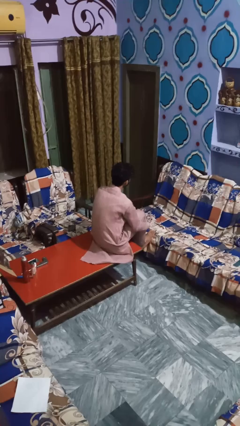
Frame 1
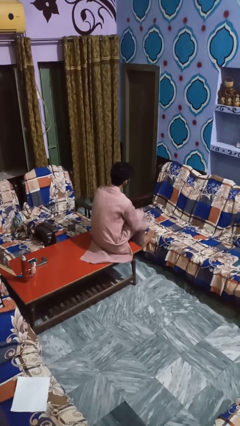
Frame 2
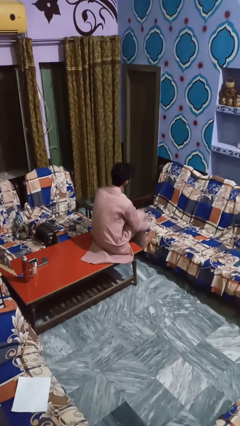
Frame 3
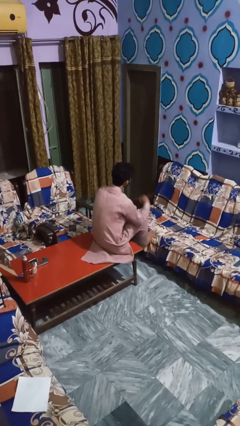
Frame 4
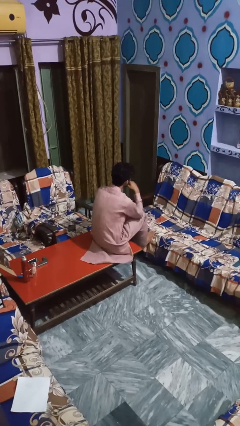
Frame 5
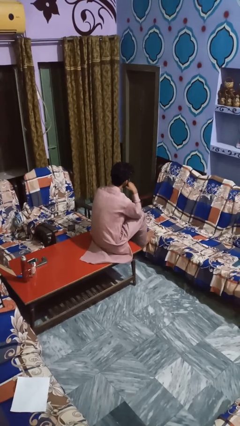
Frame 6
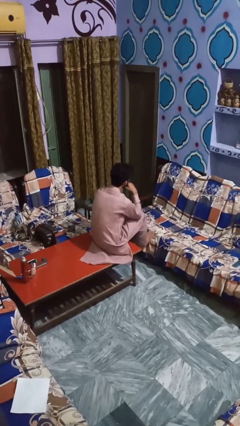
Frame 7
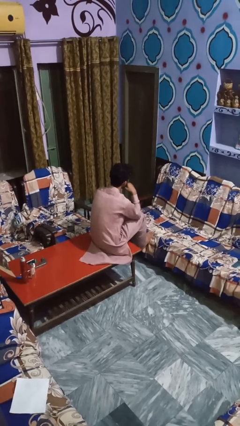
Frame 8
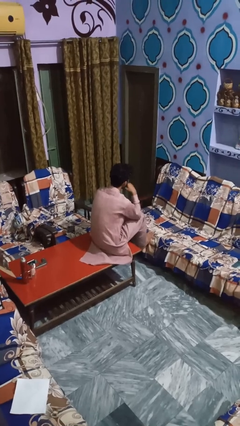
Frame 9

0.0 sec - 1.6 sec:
person licks fingers

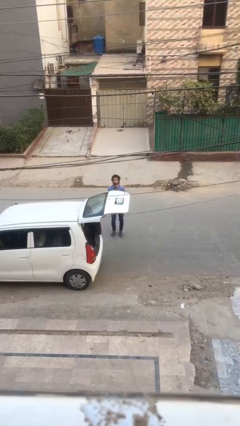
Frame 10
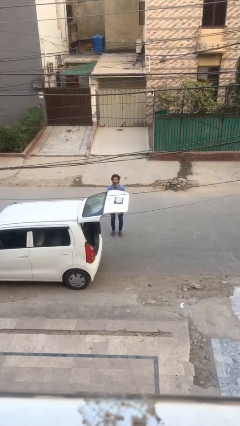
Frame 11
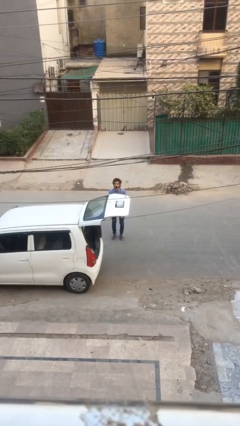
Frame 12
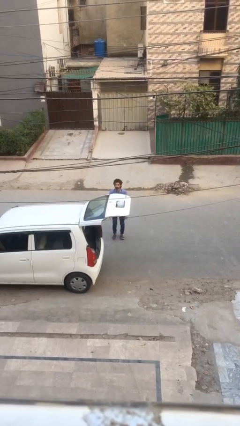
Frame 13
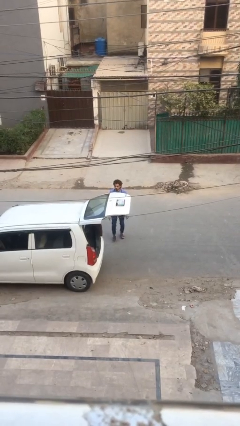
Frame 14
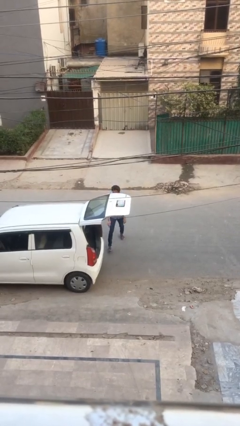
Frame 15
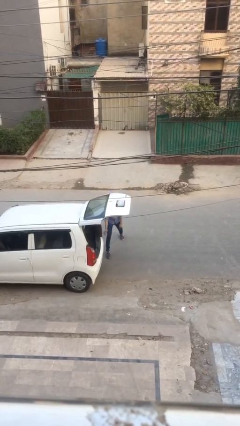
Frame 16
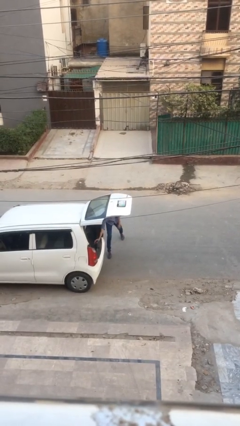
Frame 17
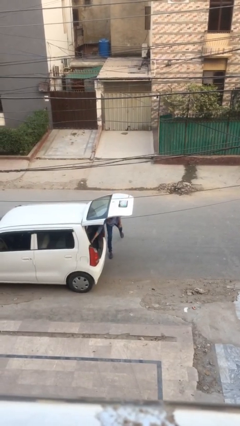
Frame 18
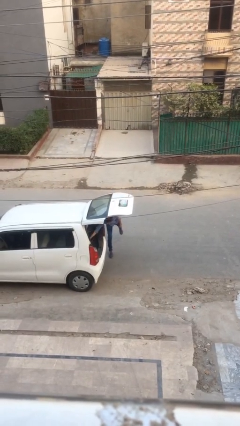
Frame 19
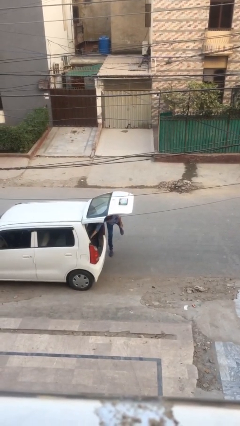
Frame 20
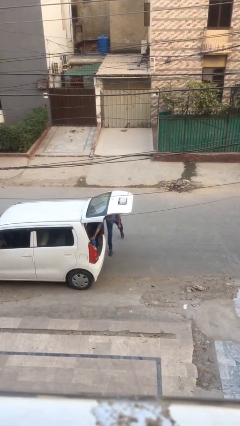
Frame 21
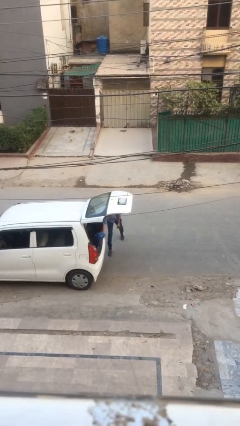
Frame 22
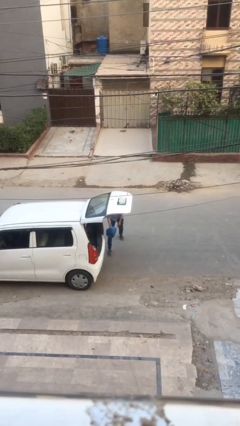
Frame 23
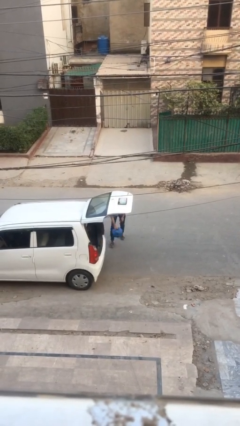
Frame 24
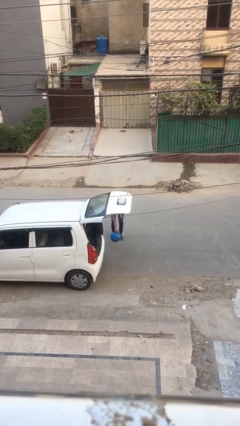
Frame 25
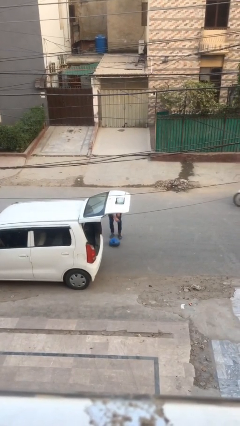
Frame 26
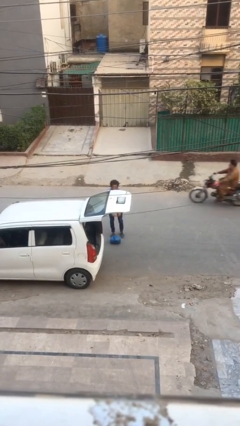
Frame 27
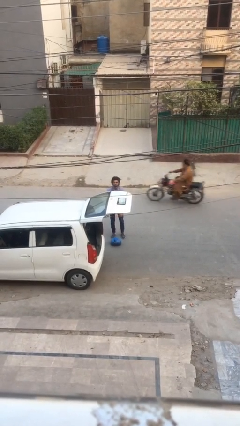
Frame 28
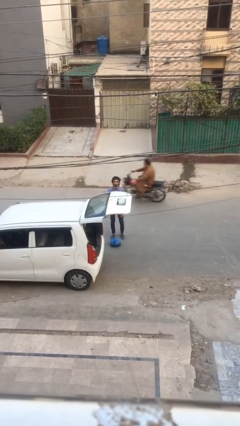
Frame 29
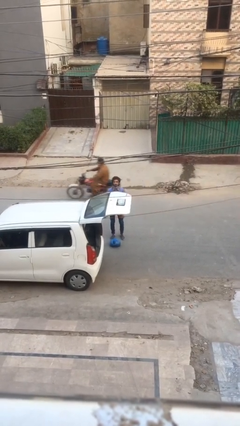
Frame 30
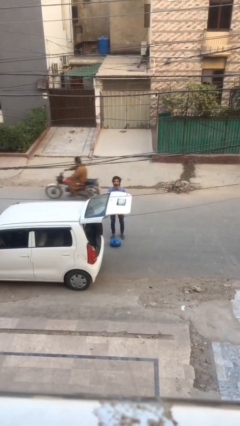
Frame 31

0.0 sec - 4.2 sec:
person unloads car

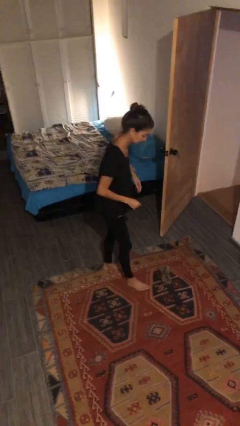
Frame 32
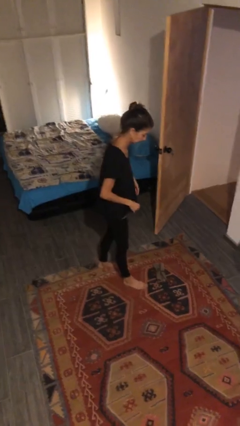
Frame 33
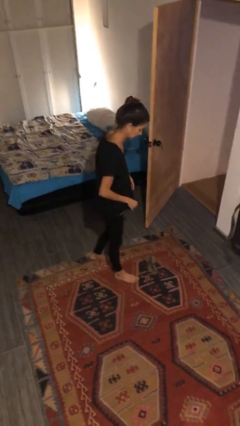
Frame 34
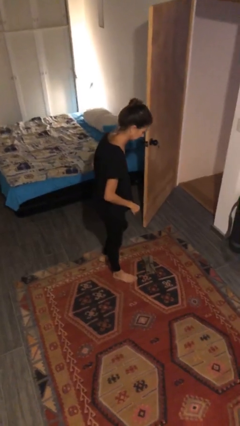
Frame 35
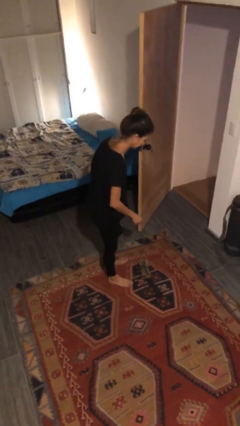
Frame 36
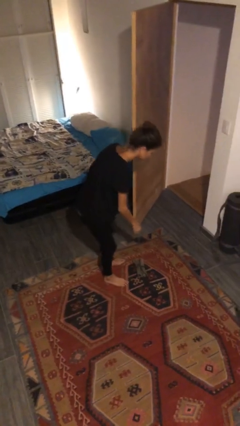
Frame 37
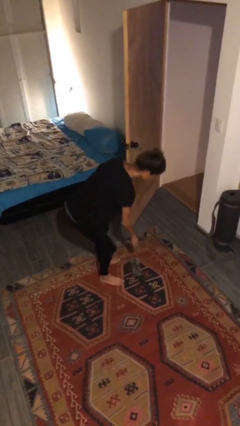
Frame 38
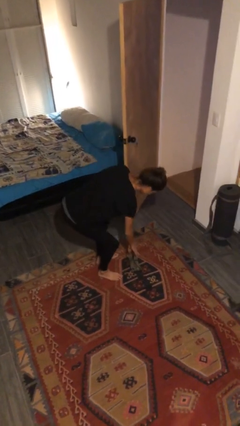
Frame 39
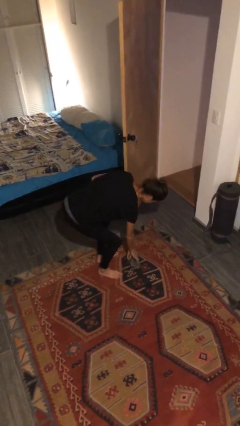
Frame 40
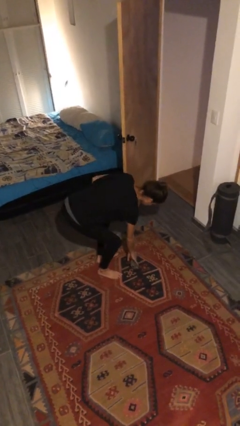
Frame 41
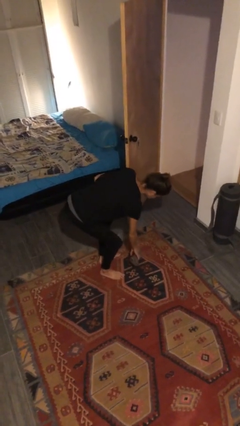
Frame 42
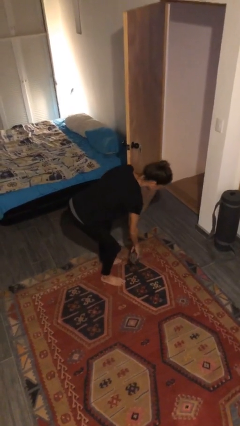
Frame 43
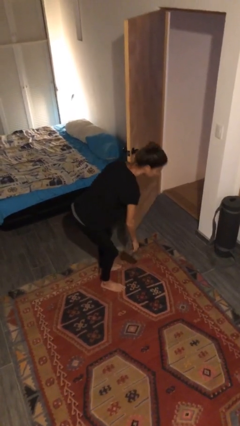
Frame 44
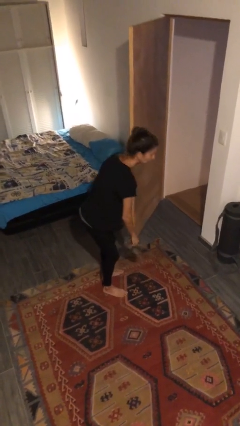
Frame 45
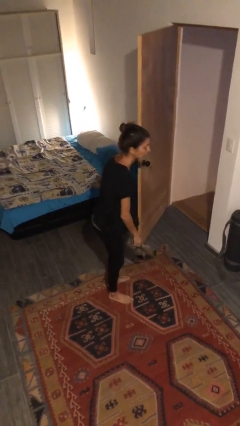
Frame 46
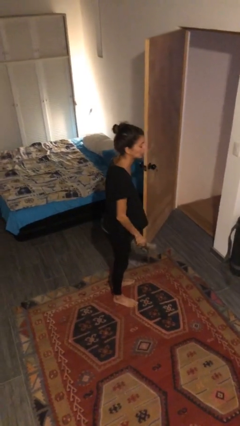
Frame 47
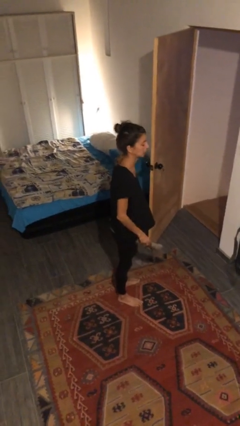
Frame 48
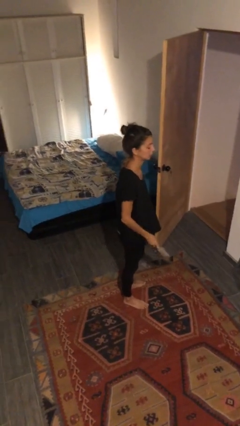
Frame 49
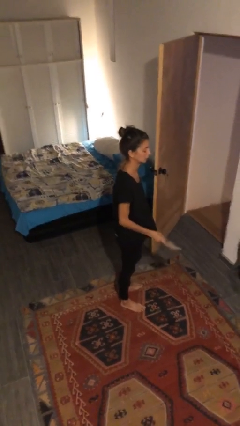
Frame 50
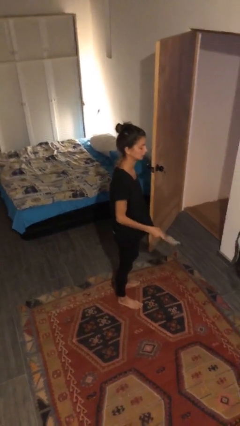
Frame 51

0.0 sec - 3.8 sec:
person picks up object from floor

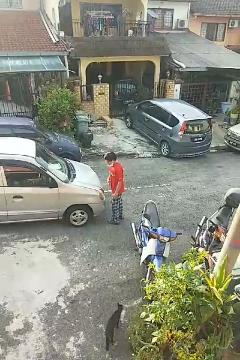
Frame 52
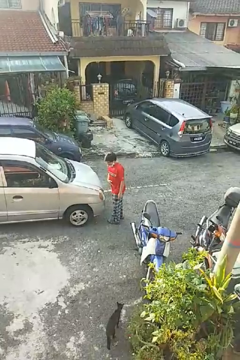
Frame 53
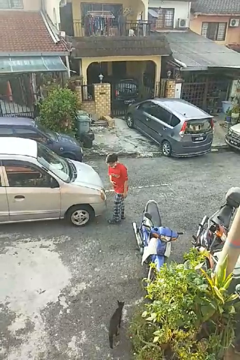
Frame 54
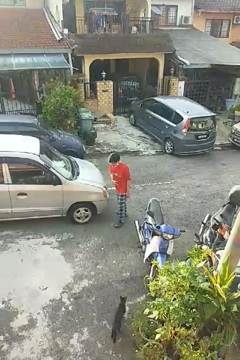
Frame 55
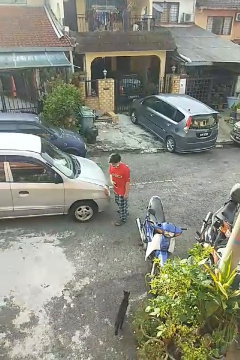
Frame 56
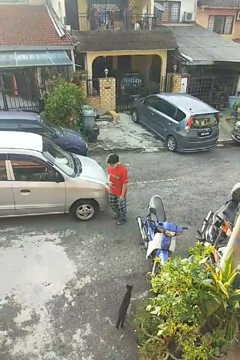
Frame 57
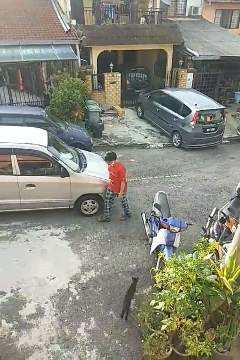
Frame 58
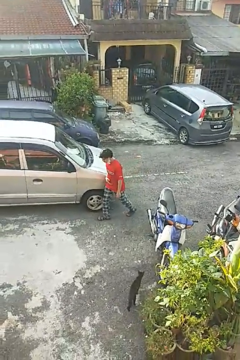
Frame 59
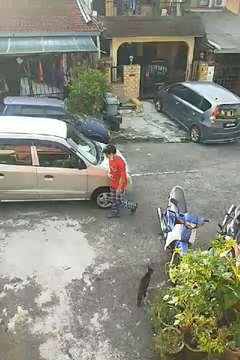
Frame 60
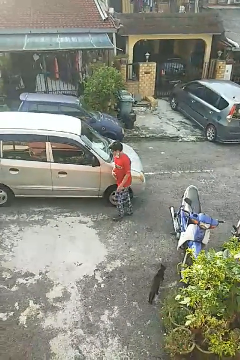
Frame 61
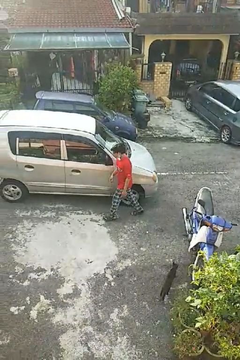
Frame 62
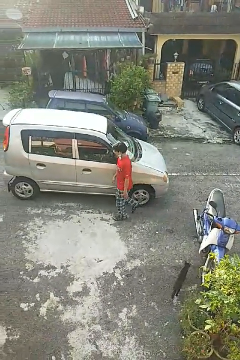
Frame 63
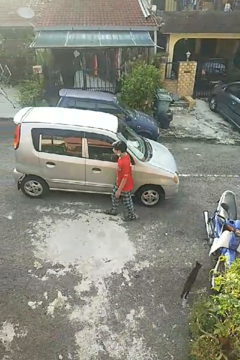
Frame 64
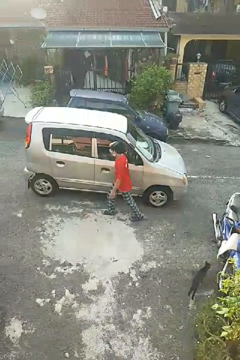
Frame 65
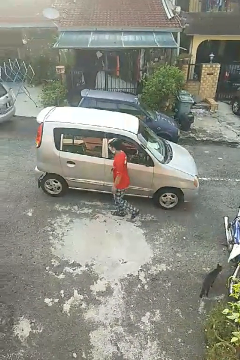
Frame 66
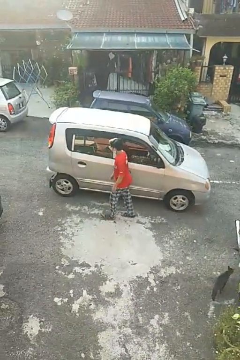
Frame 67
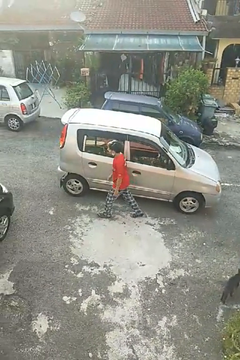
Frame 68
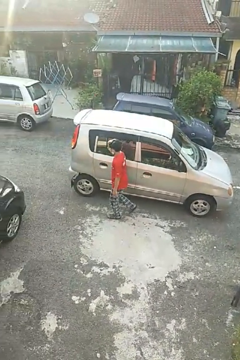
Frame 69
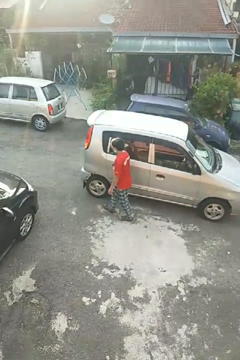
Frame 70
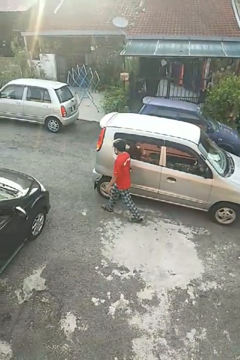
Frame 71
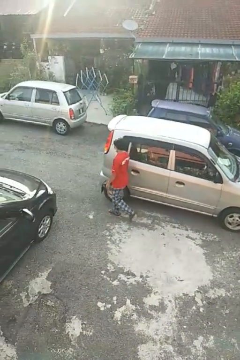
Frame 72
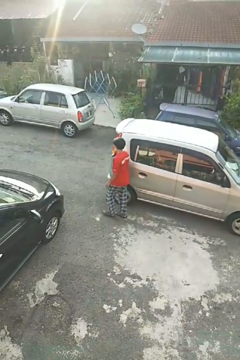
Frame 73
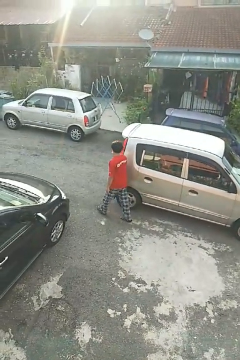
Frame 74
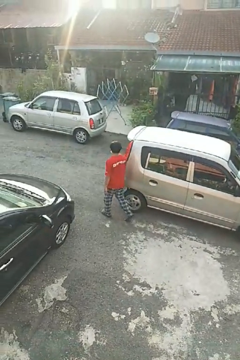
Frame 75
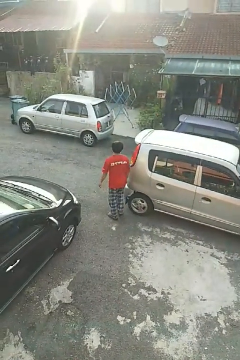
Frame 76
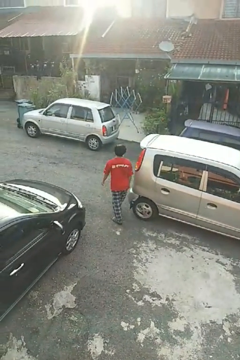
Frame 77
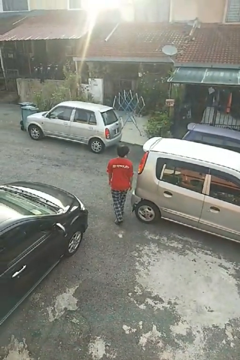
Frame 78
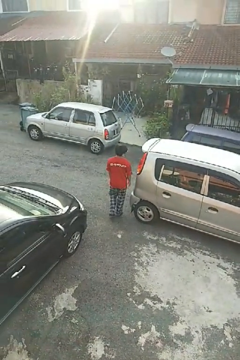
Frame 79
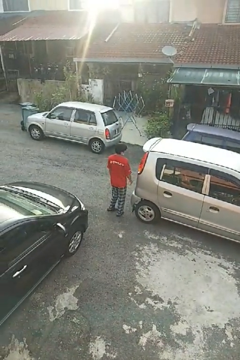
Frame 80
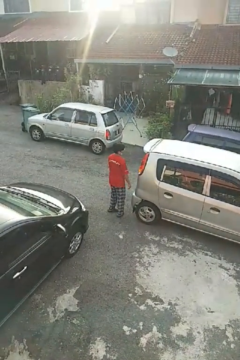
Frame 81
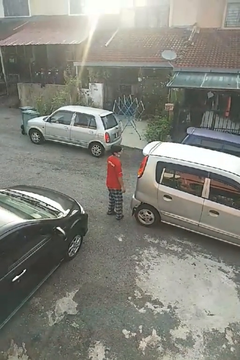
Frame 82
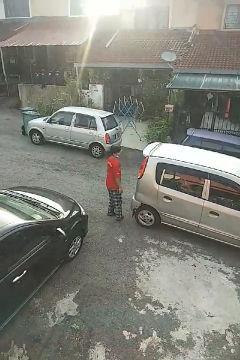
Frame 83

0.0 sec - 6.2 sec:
person walks around car

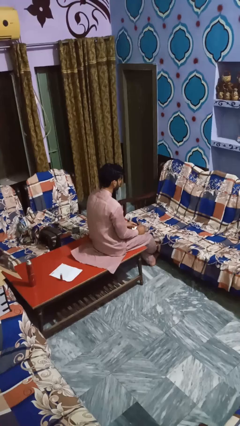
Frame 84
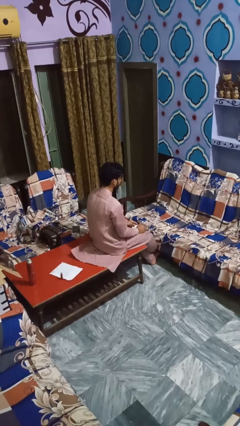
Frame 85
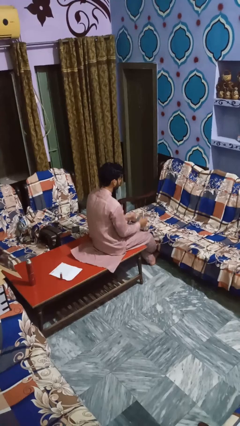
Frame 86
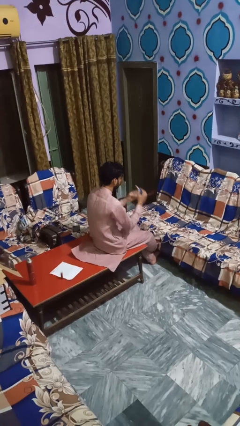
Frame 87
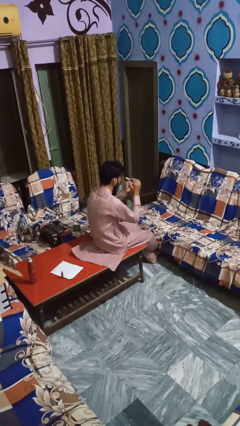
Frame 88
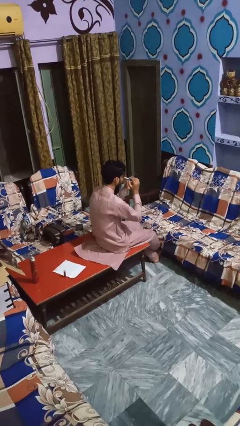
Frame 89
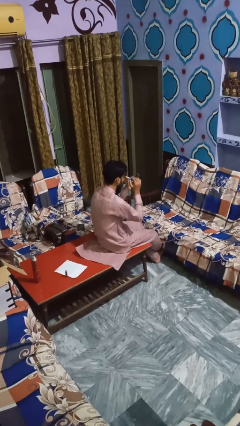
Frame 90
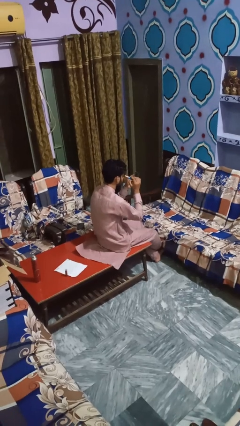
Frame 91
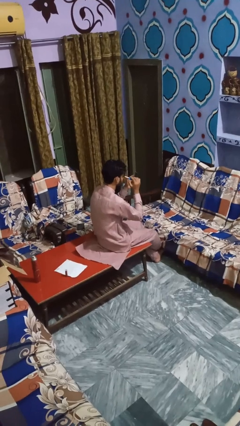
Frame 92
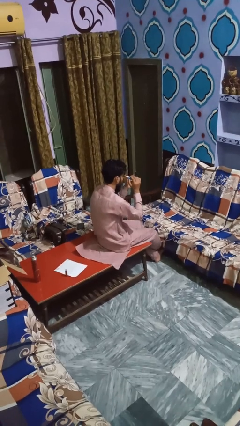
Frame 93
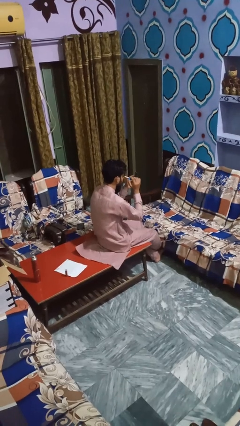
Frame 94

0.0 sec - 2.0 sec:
person applies eye makeup

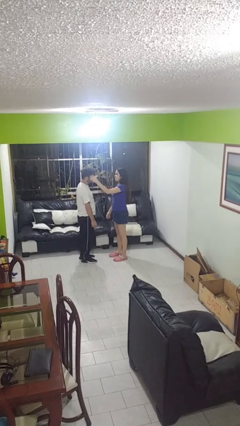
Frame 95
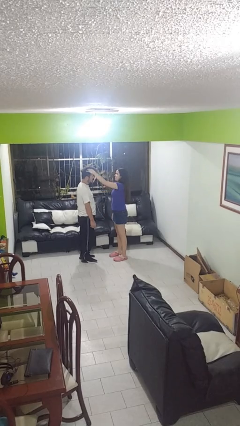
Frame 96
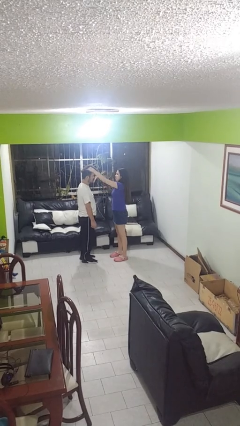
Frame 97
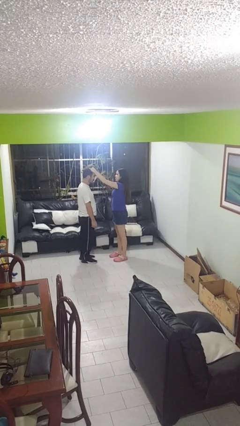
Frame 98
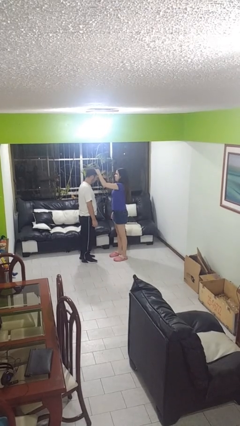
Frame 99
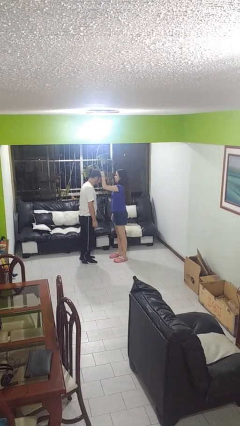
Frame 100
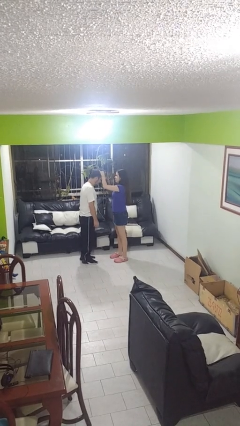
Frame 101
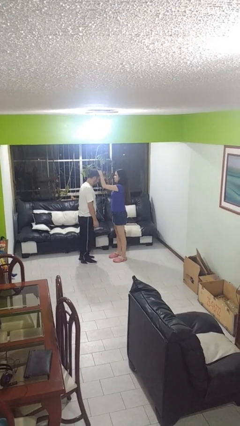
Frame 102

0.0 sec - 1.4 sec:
person grabs person by hair
